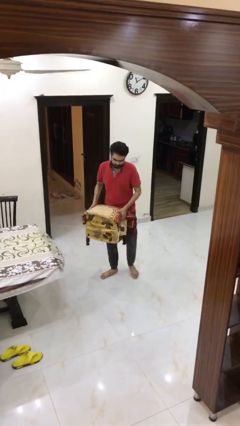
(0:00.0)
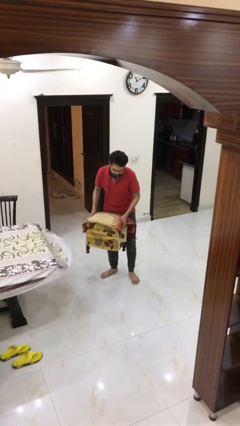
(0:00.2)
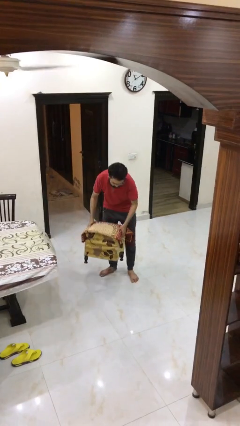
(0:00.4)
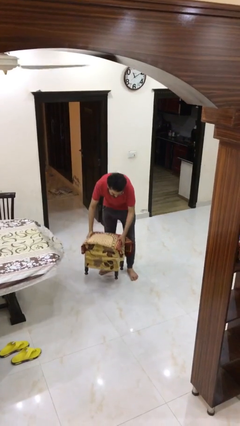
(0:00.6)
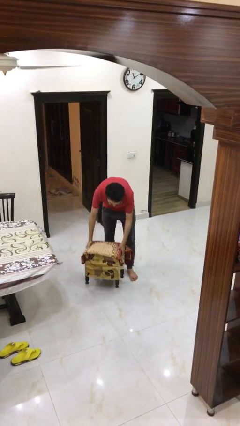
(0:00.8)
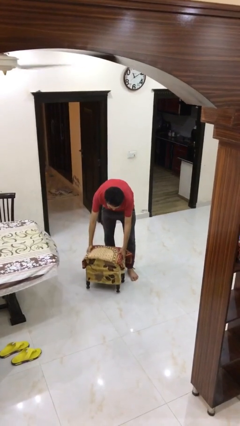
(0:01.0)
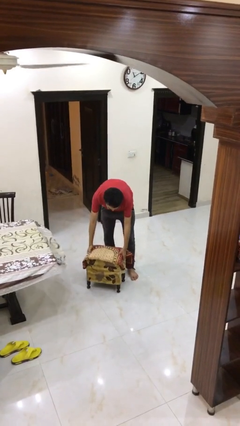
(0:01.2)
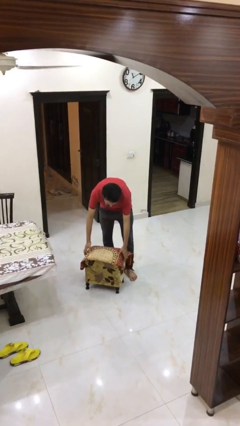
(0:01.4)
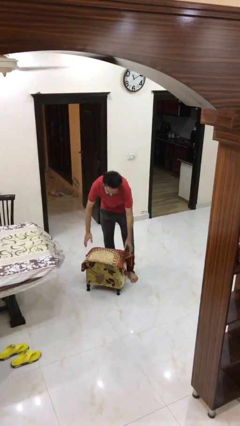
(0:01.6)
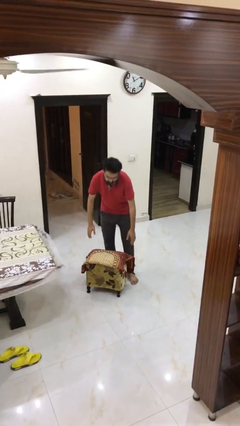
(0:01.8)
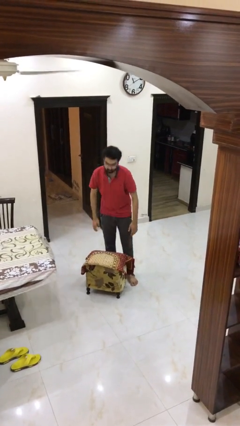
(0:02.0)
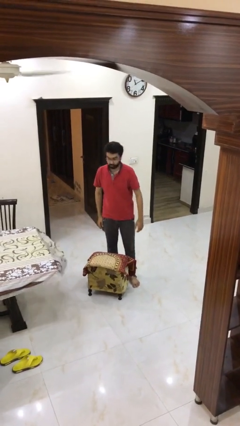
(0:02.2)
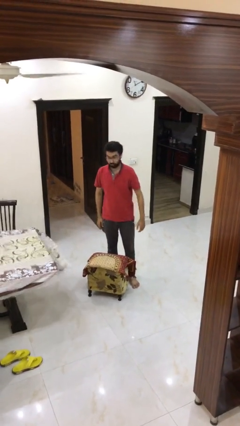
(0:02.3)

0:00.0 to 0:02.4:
person puts down object on floor

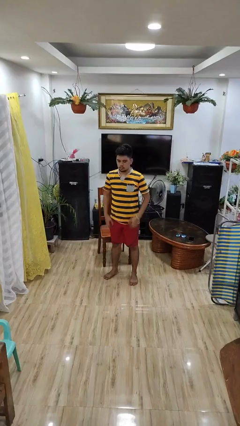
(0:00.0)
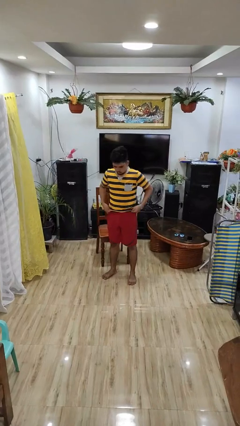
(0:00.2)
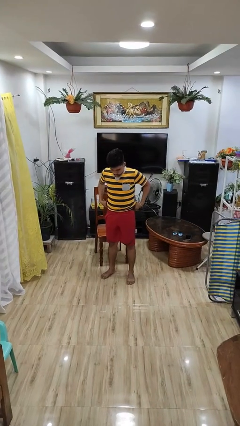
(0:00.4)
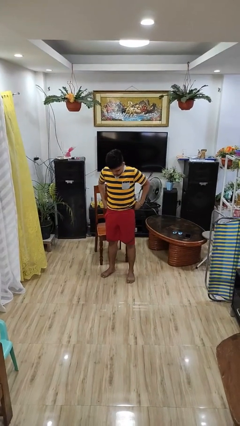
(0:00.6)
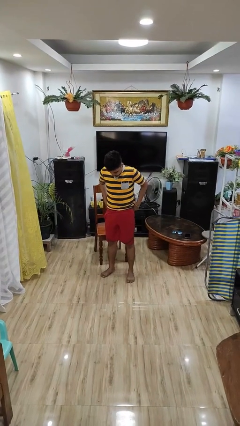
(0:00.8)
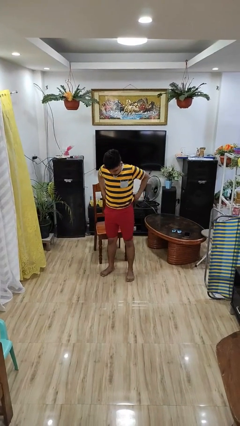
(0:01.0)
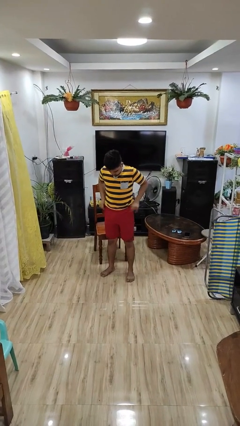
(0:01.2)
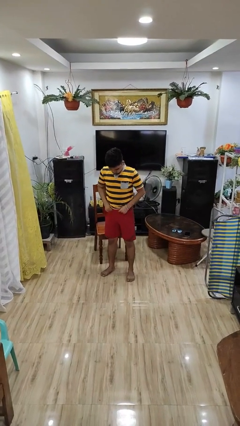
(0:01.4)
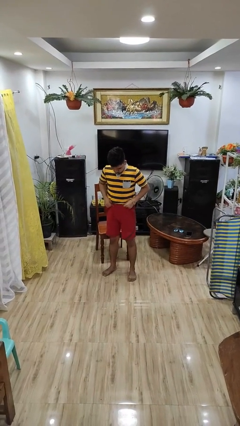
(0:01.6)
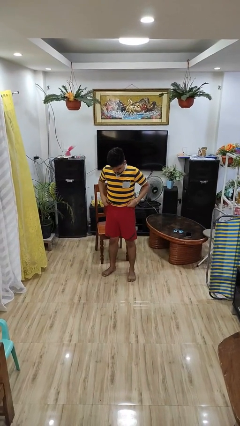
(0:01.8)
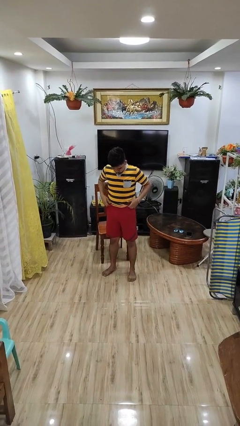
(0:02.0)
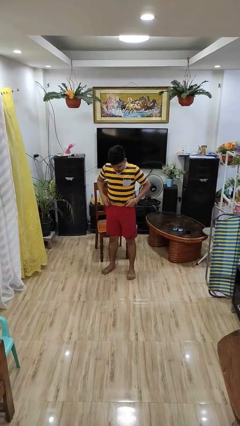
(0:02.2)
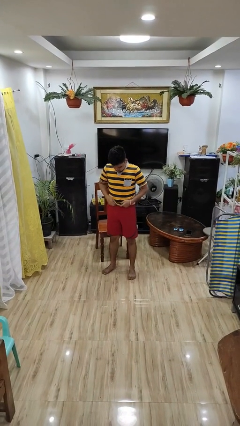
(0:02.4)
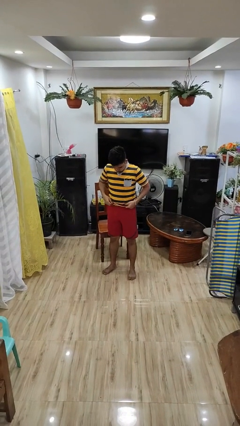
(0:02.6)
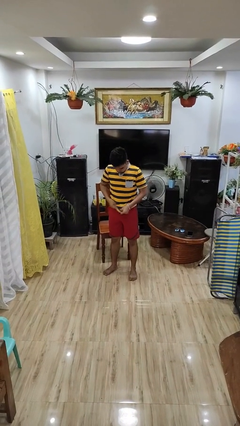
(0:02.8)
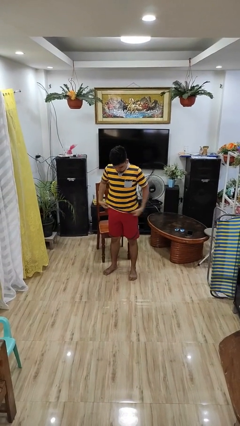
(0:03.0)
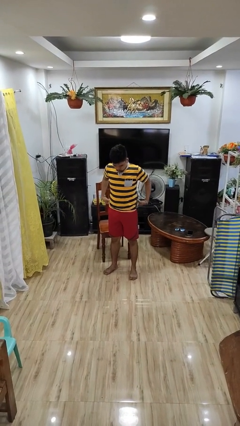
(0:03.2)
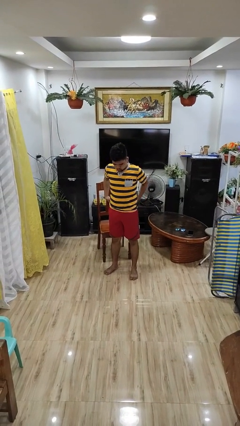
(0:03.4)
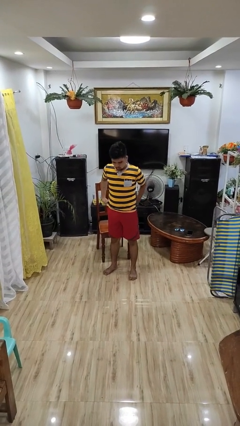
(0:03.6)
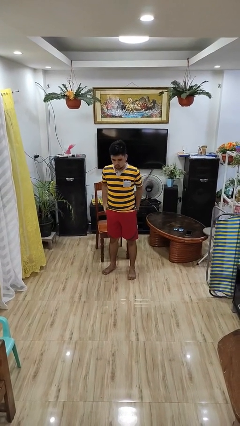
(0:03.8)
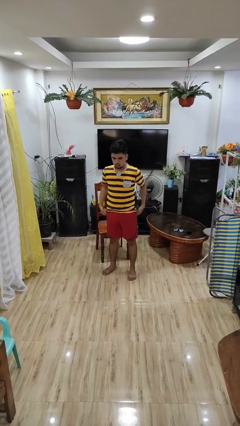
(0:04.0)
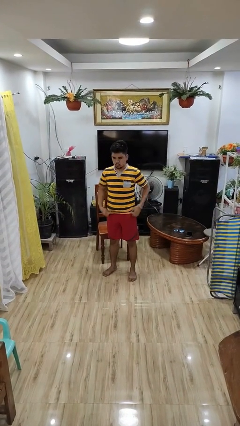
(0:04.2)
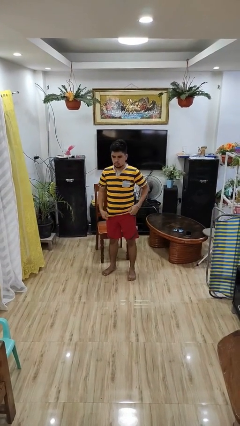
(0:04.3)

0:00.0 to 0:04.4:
person hikes up pants

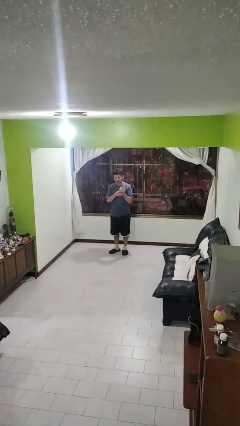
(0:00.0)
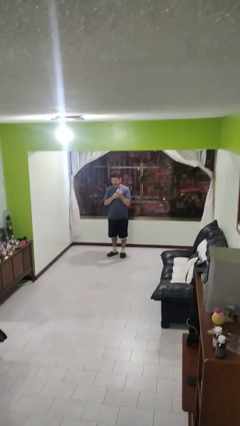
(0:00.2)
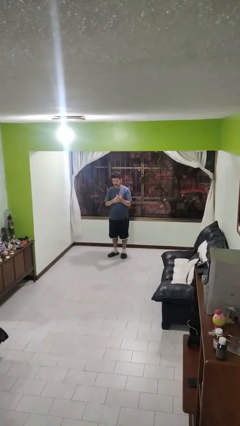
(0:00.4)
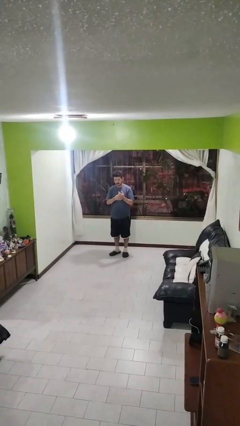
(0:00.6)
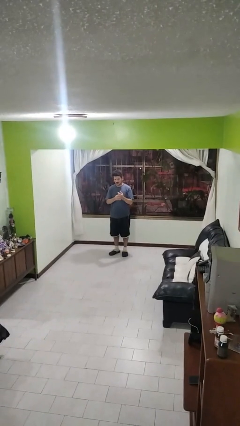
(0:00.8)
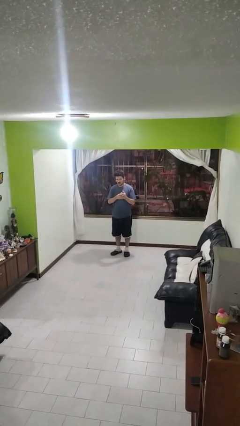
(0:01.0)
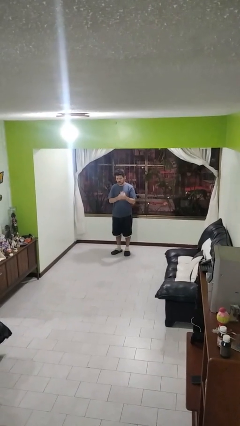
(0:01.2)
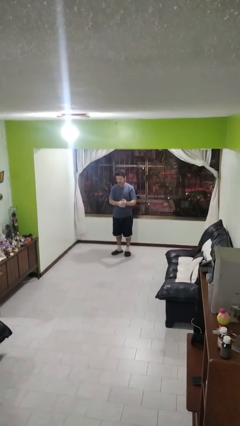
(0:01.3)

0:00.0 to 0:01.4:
person snaps fingers

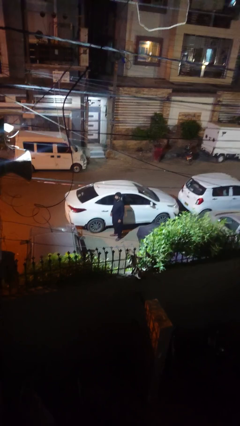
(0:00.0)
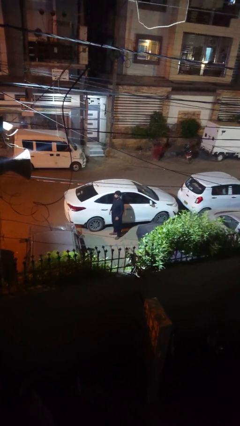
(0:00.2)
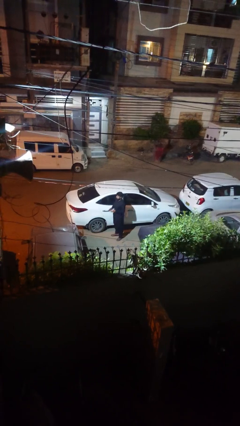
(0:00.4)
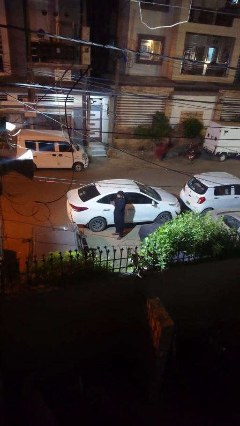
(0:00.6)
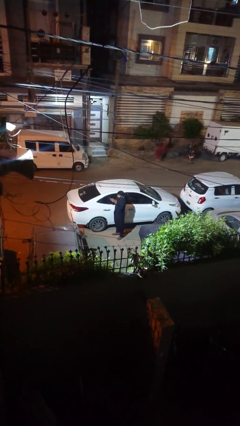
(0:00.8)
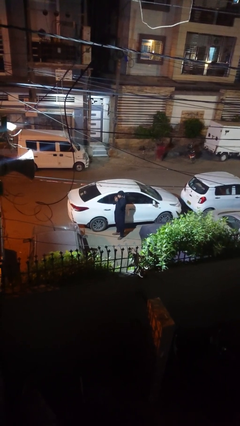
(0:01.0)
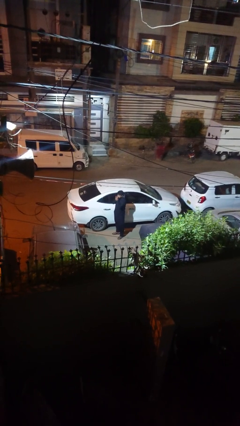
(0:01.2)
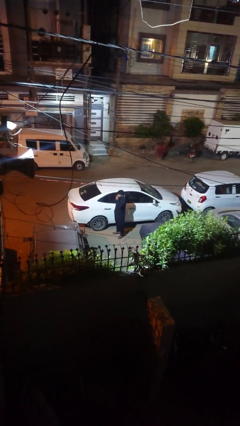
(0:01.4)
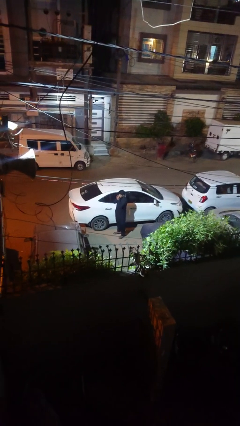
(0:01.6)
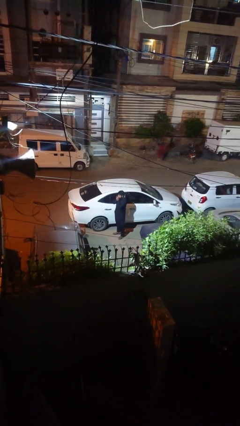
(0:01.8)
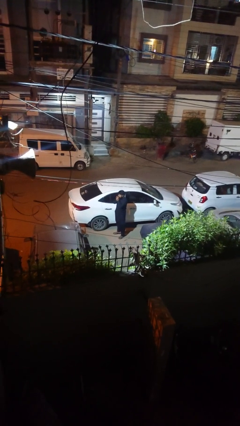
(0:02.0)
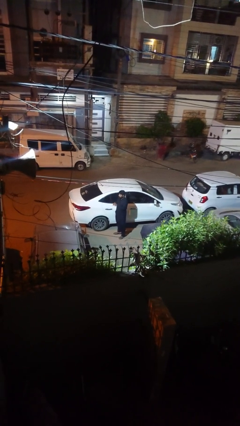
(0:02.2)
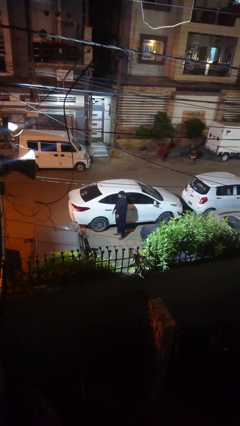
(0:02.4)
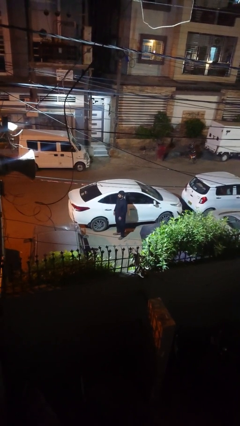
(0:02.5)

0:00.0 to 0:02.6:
person blows into hands

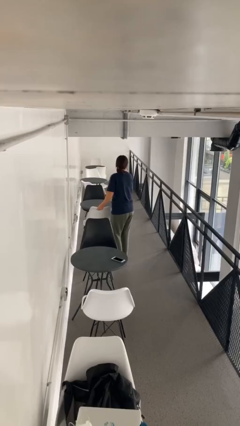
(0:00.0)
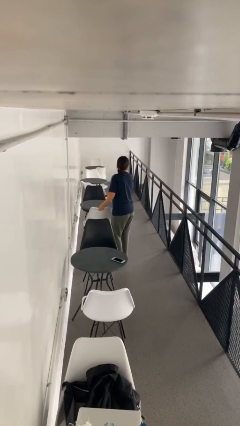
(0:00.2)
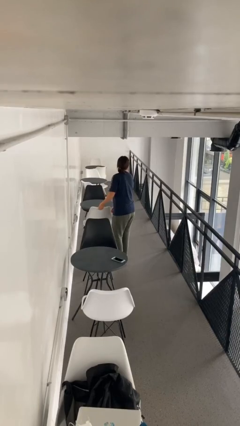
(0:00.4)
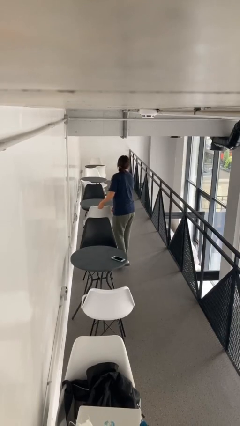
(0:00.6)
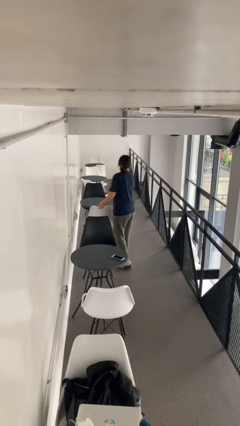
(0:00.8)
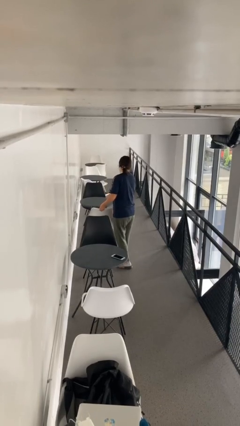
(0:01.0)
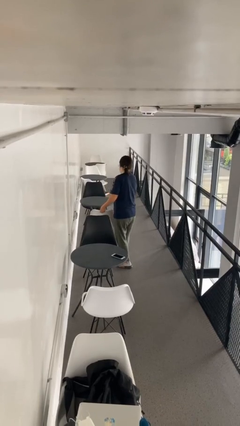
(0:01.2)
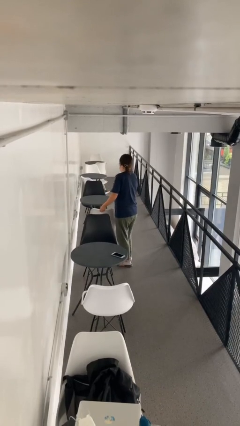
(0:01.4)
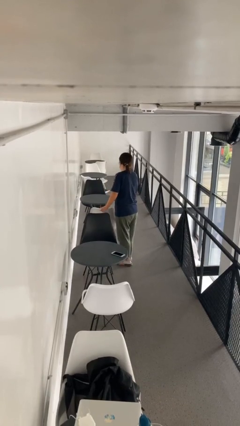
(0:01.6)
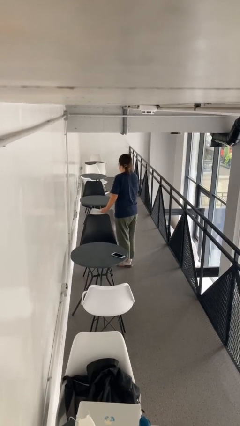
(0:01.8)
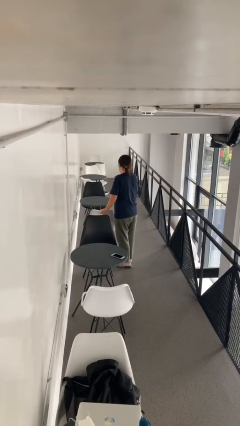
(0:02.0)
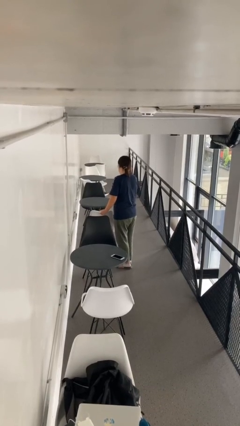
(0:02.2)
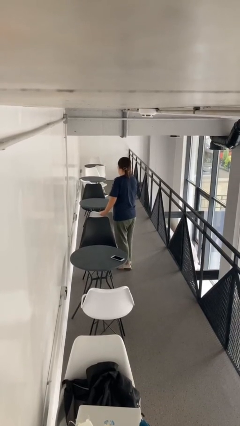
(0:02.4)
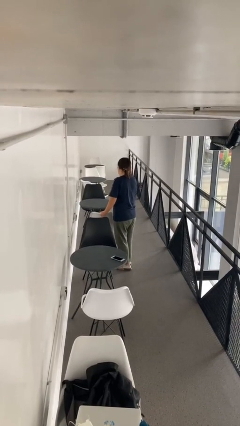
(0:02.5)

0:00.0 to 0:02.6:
person pulls out chair

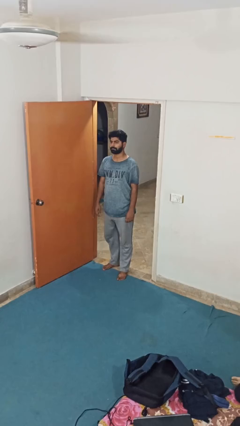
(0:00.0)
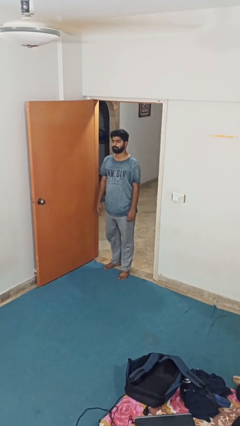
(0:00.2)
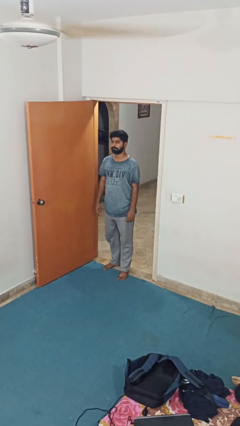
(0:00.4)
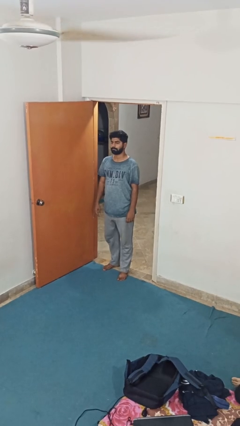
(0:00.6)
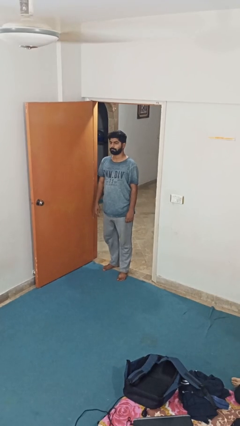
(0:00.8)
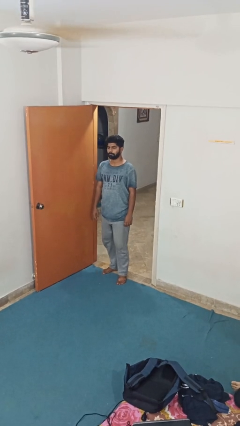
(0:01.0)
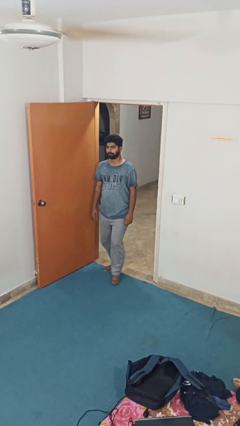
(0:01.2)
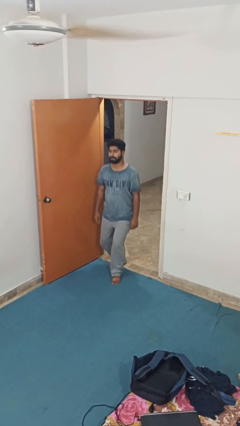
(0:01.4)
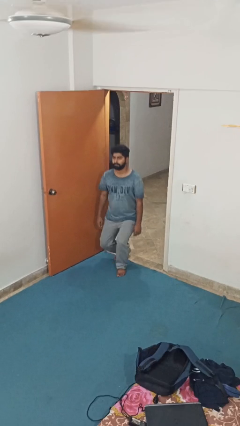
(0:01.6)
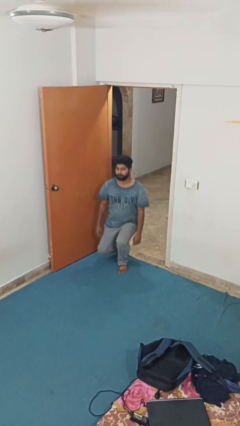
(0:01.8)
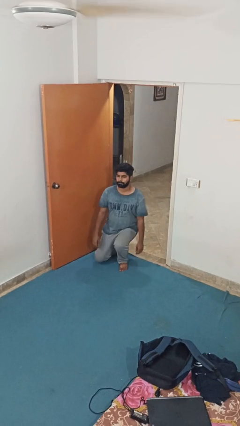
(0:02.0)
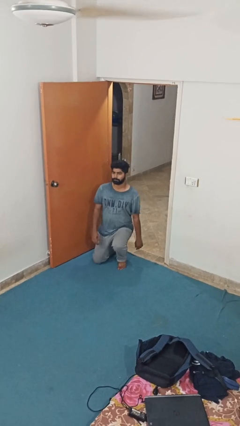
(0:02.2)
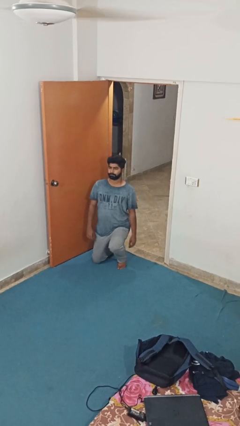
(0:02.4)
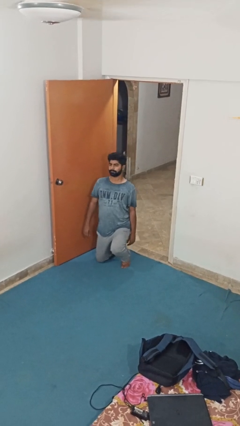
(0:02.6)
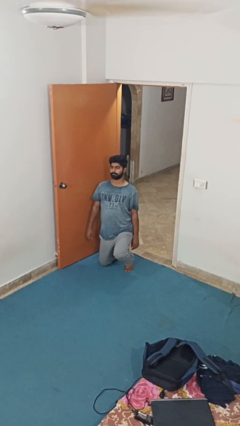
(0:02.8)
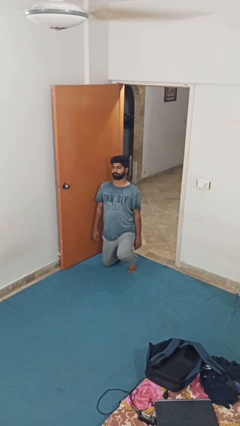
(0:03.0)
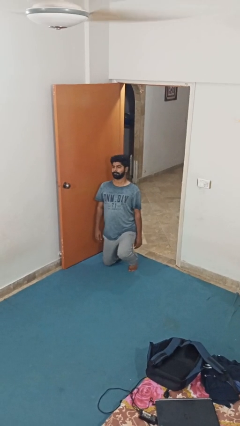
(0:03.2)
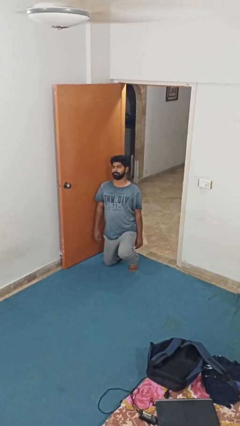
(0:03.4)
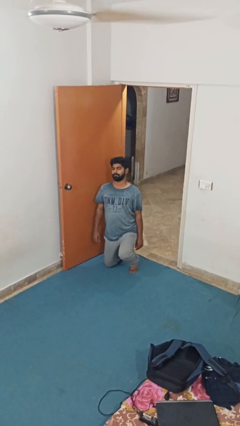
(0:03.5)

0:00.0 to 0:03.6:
person kneels

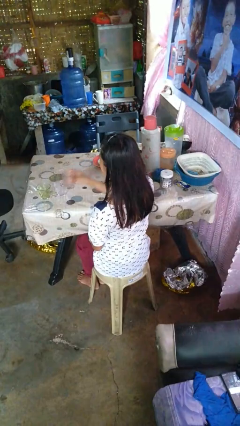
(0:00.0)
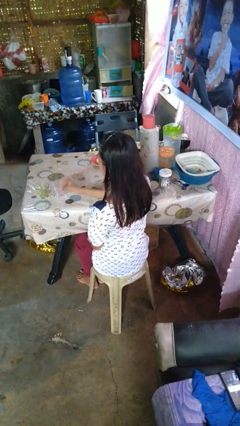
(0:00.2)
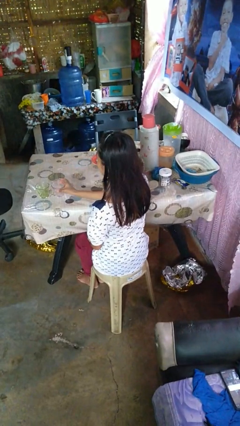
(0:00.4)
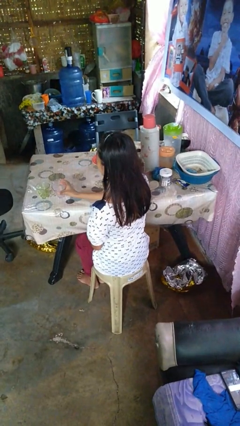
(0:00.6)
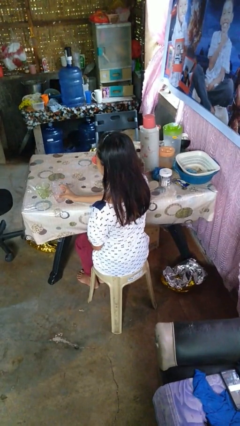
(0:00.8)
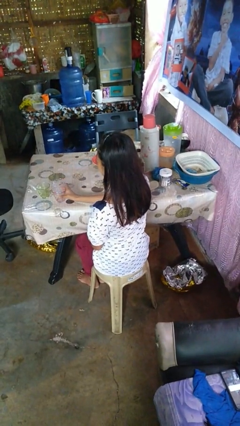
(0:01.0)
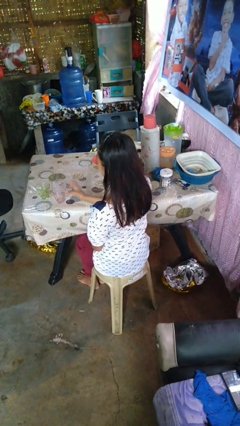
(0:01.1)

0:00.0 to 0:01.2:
person puts down object on table
